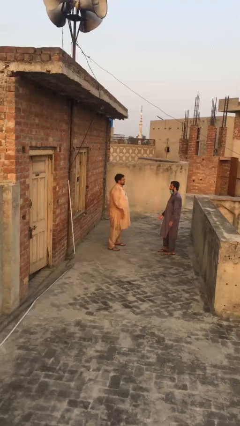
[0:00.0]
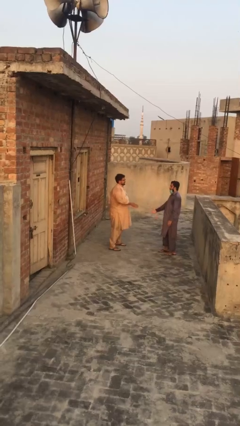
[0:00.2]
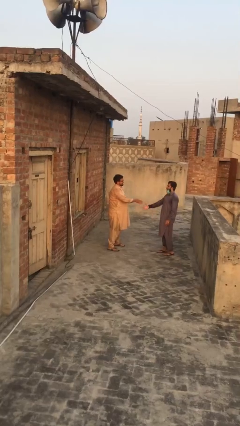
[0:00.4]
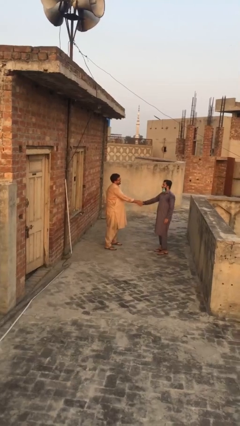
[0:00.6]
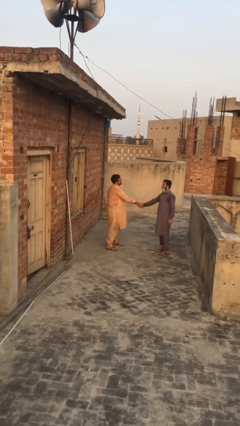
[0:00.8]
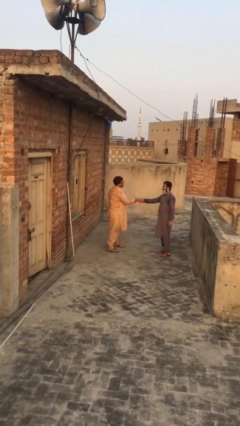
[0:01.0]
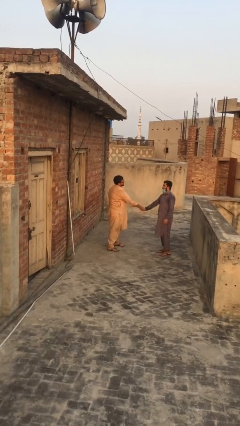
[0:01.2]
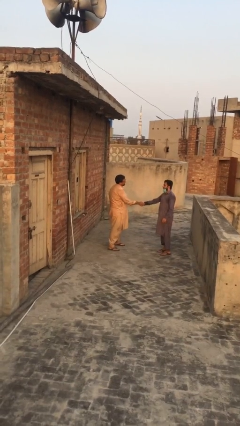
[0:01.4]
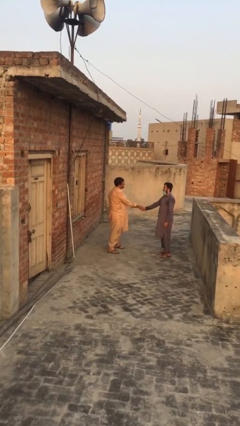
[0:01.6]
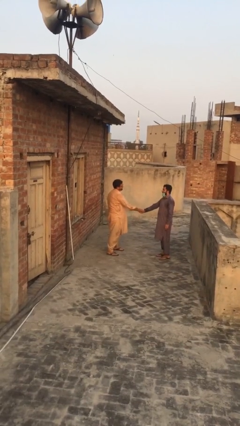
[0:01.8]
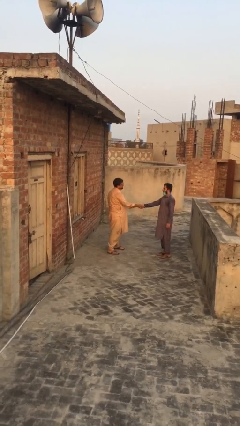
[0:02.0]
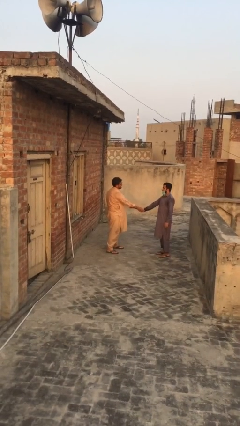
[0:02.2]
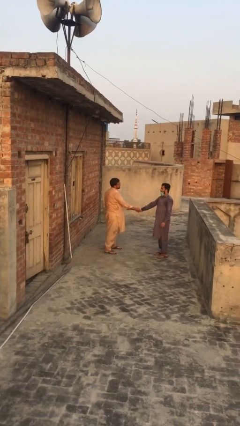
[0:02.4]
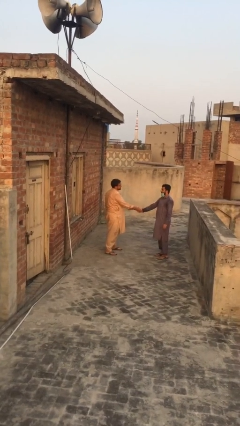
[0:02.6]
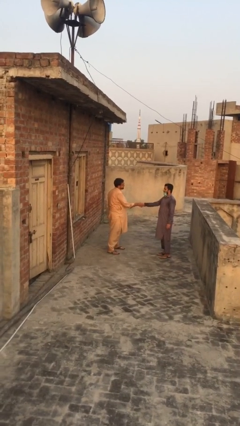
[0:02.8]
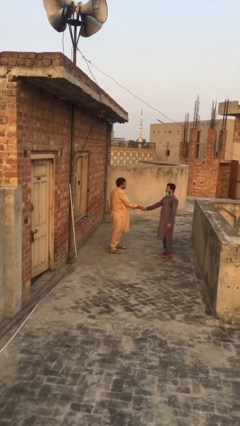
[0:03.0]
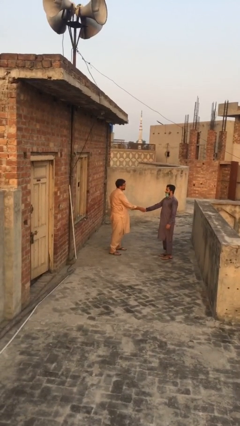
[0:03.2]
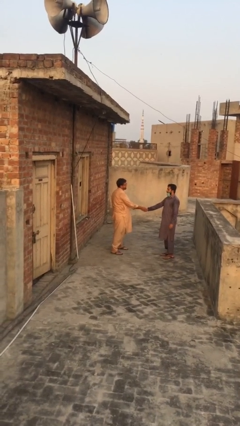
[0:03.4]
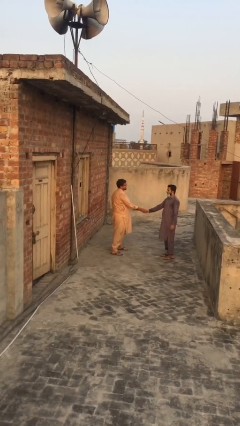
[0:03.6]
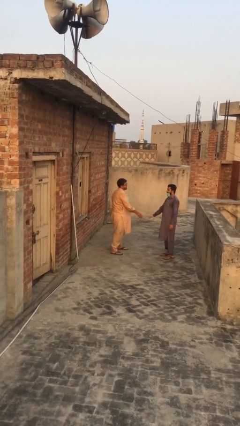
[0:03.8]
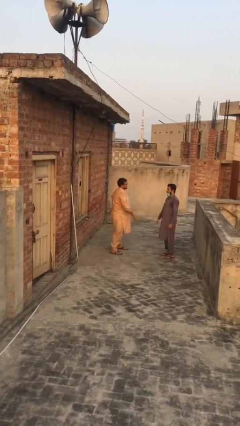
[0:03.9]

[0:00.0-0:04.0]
person shakes hand

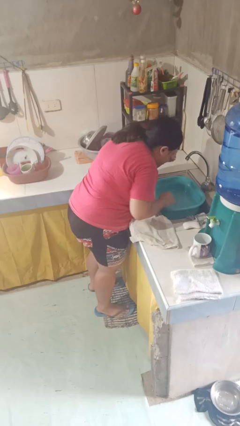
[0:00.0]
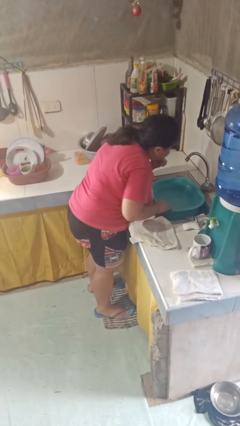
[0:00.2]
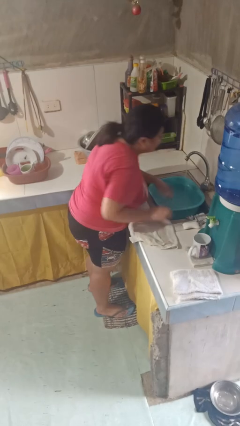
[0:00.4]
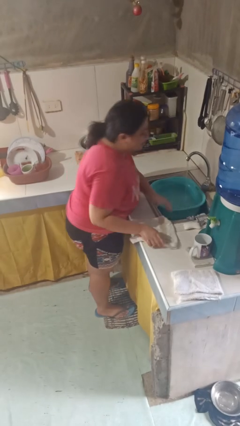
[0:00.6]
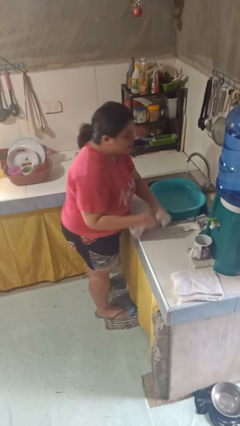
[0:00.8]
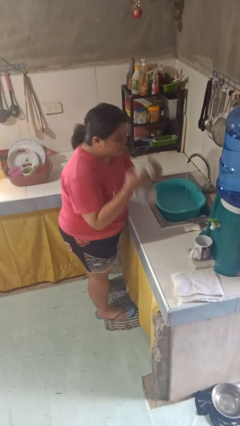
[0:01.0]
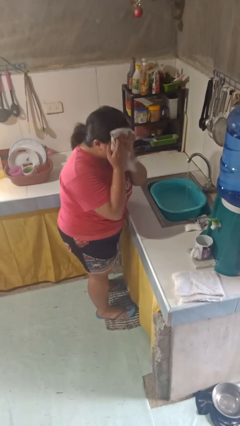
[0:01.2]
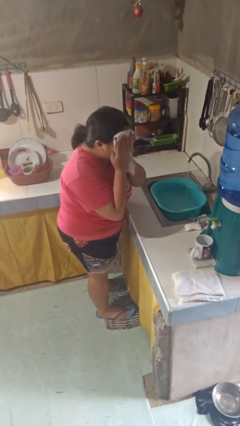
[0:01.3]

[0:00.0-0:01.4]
person dries face with towel

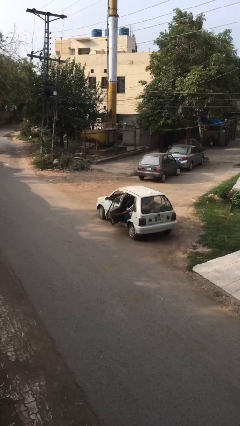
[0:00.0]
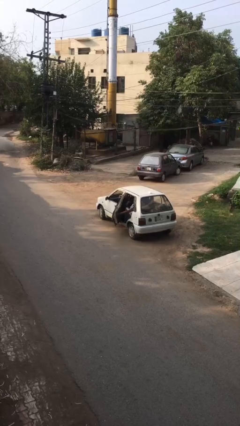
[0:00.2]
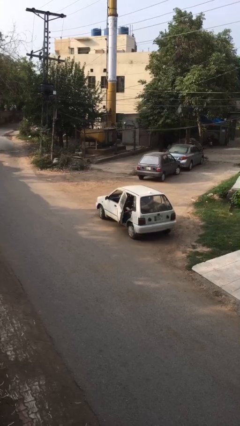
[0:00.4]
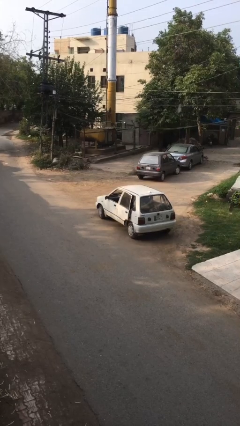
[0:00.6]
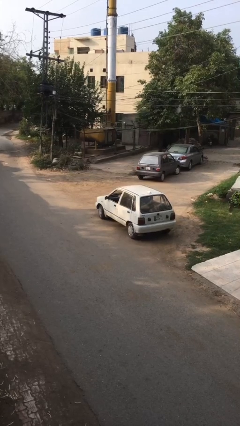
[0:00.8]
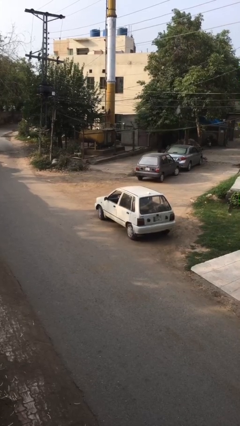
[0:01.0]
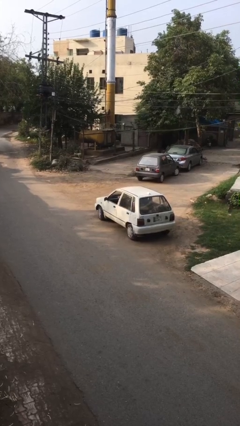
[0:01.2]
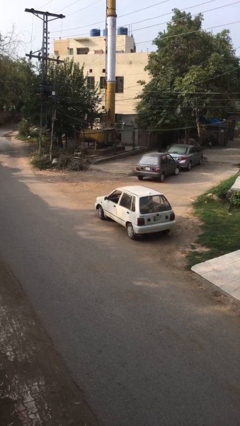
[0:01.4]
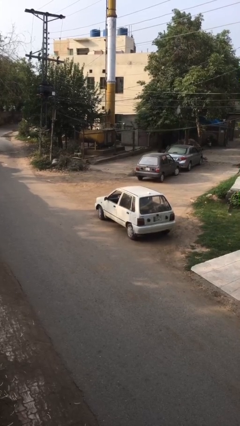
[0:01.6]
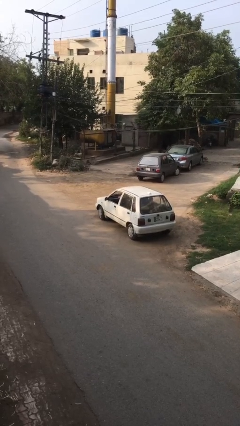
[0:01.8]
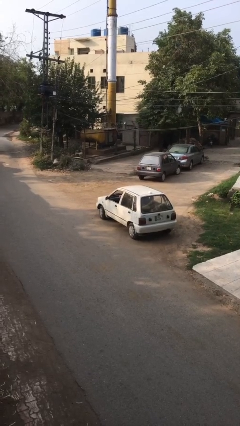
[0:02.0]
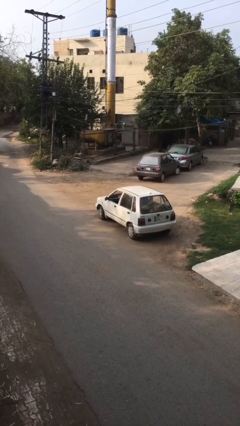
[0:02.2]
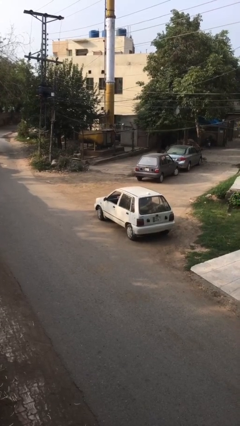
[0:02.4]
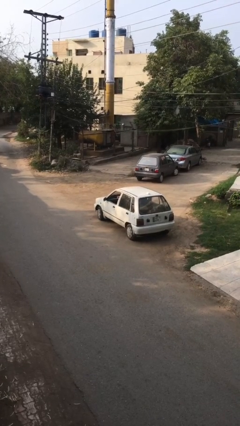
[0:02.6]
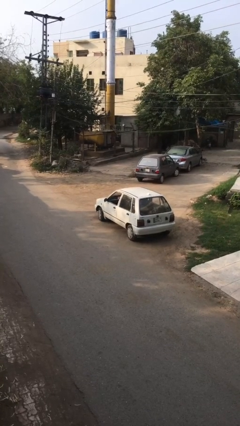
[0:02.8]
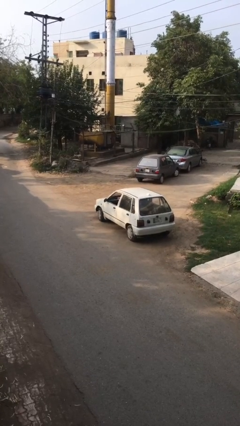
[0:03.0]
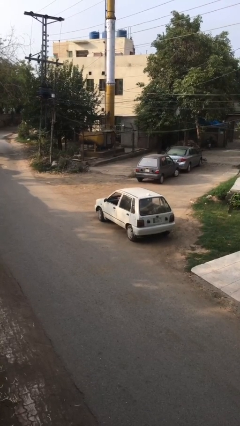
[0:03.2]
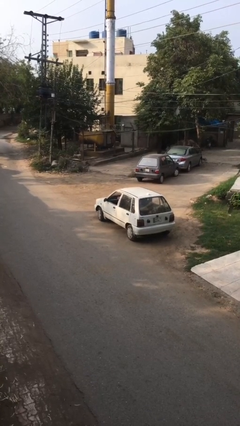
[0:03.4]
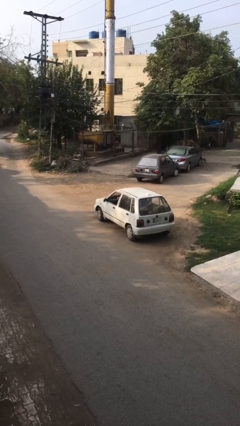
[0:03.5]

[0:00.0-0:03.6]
person closes car door

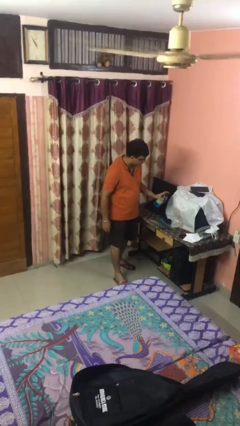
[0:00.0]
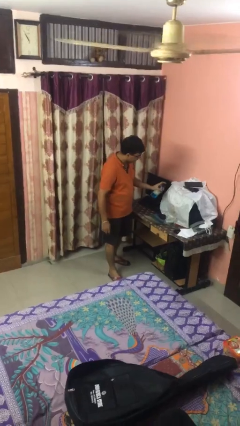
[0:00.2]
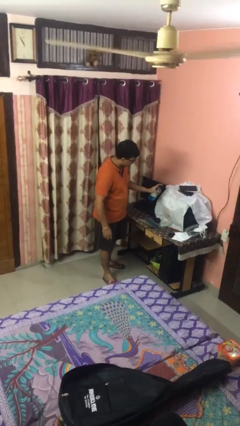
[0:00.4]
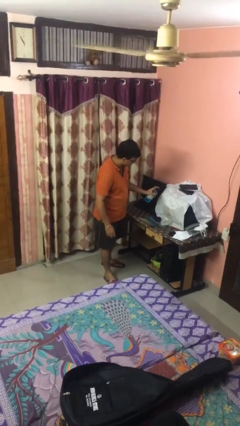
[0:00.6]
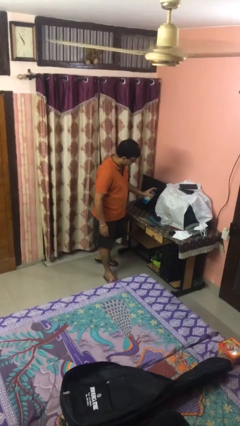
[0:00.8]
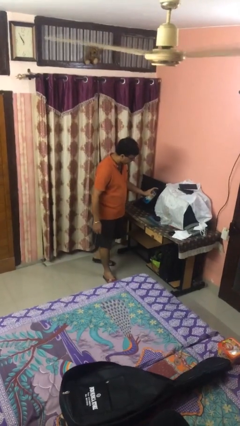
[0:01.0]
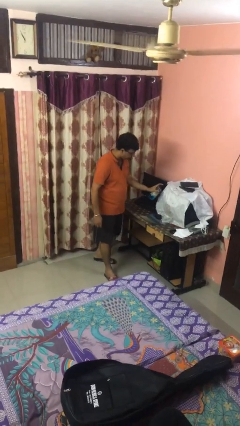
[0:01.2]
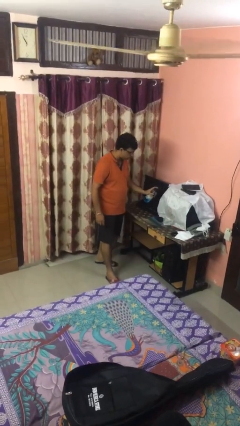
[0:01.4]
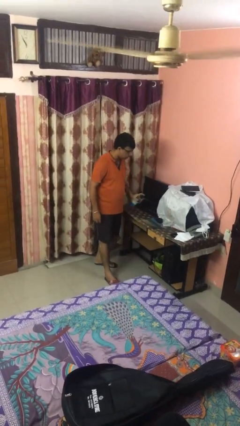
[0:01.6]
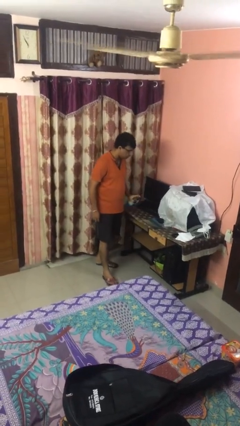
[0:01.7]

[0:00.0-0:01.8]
person sprays from bottle

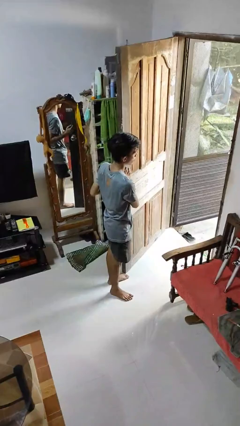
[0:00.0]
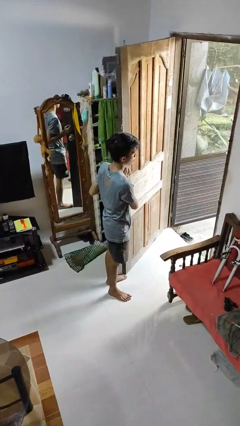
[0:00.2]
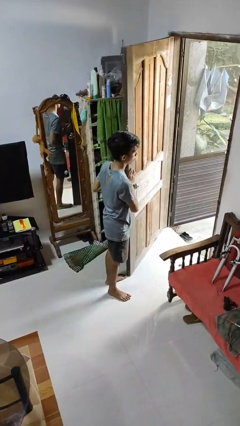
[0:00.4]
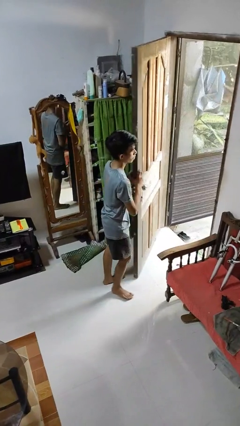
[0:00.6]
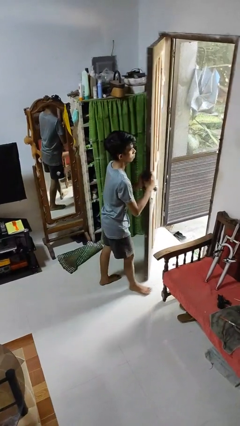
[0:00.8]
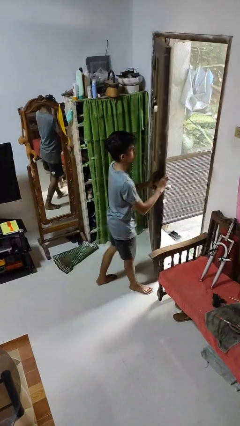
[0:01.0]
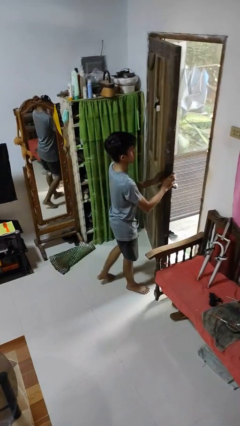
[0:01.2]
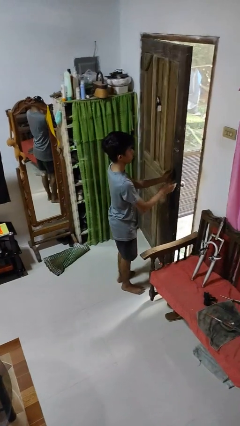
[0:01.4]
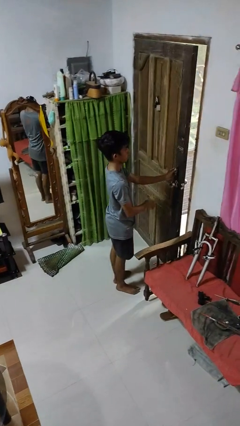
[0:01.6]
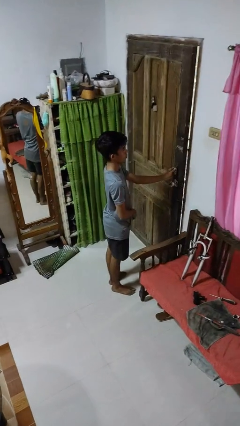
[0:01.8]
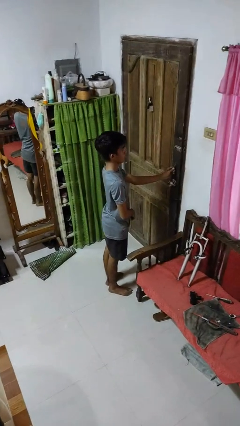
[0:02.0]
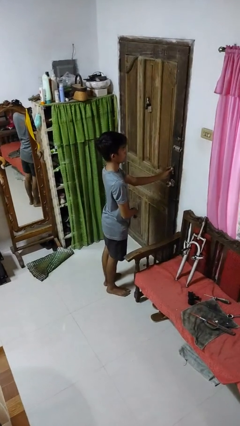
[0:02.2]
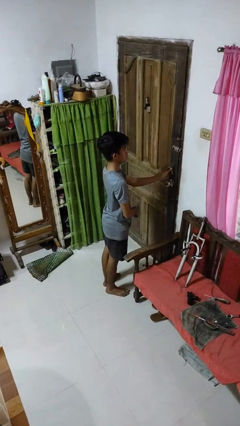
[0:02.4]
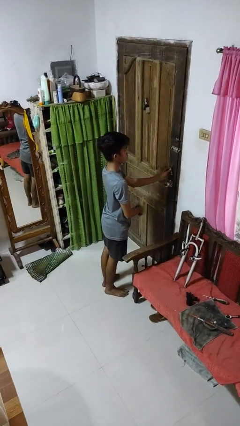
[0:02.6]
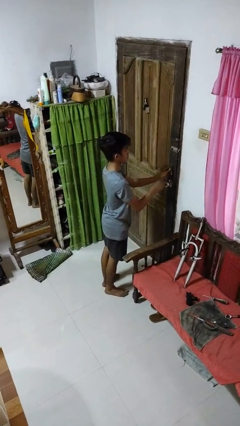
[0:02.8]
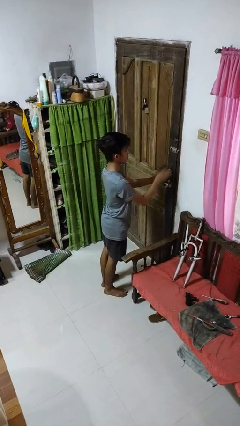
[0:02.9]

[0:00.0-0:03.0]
person closes facility door

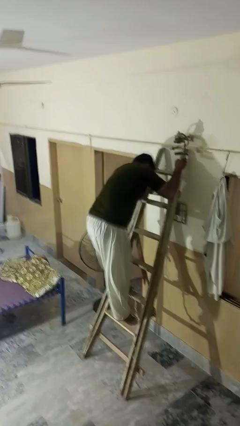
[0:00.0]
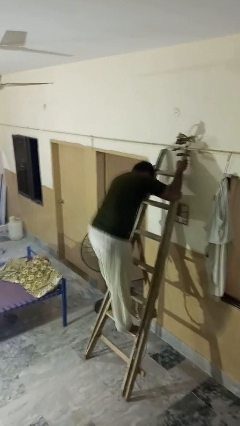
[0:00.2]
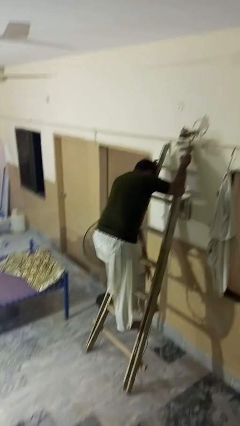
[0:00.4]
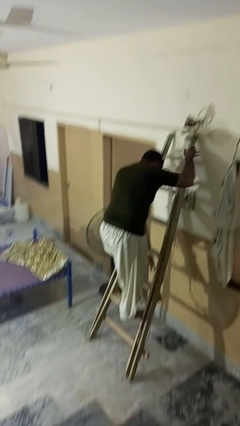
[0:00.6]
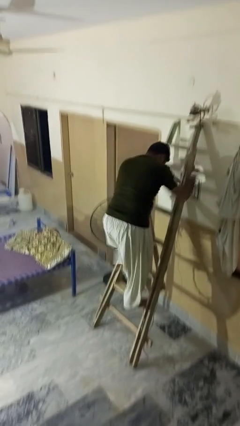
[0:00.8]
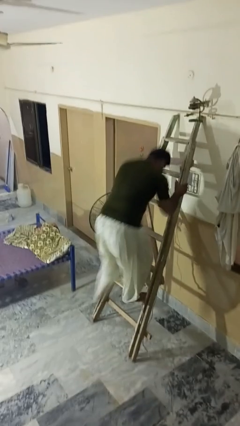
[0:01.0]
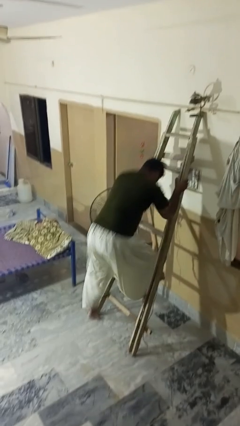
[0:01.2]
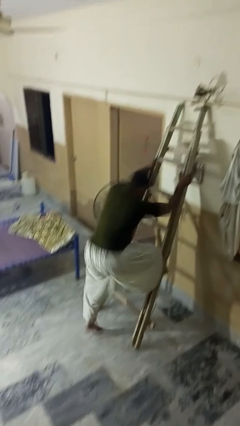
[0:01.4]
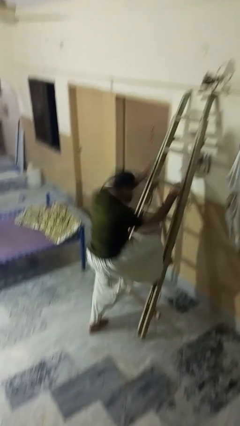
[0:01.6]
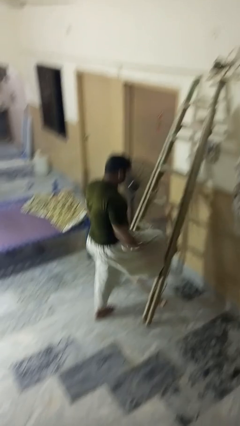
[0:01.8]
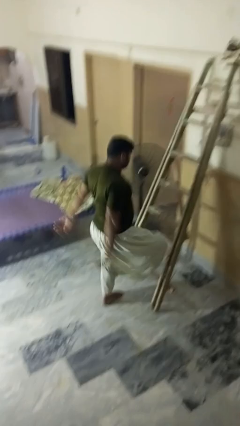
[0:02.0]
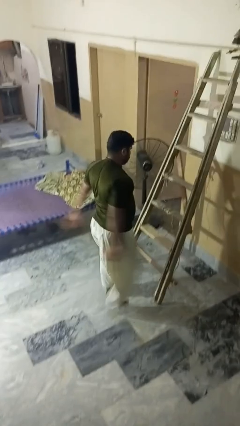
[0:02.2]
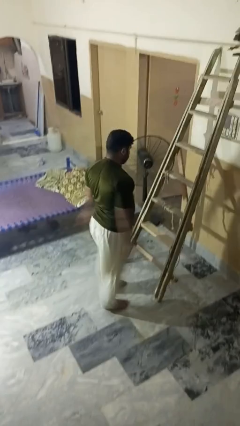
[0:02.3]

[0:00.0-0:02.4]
person climbs down ladder

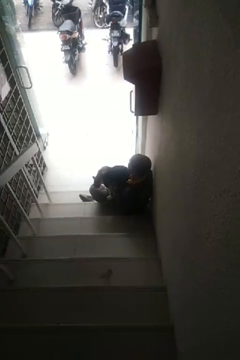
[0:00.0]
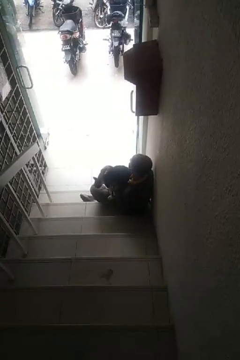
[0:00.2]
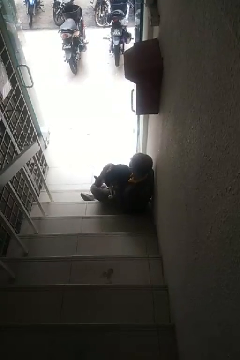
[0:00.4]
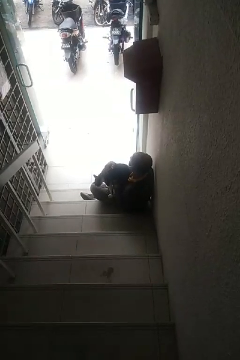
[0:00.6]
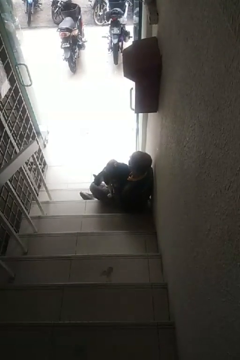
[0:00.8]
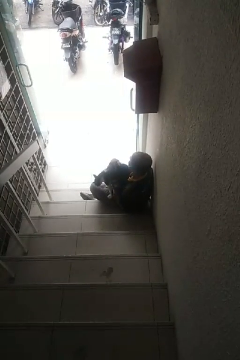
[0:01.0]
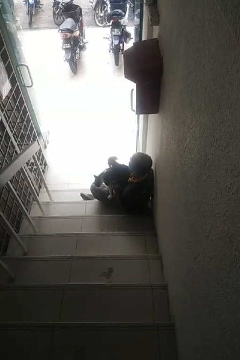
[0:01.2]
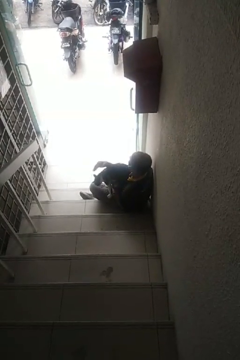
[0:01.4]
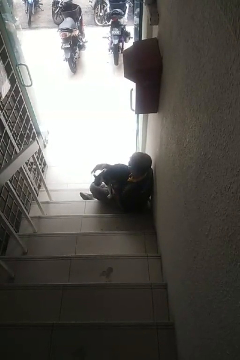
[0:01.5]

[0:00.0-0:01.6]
person pets cat
